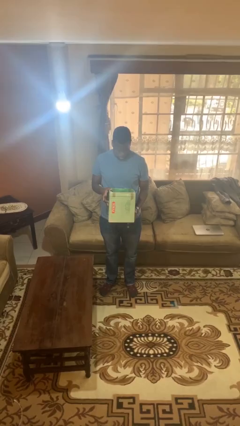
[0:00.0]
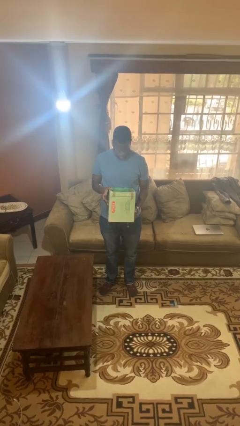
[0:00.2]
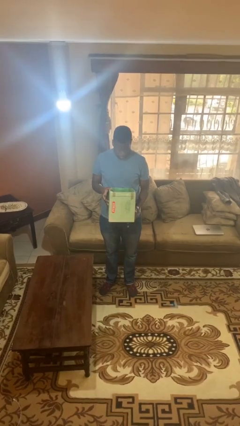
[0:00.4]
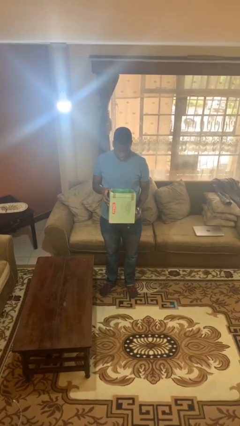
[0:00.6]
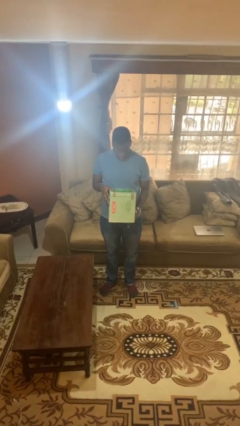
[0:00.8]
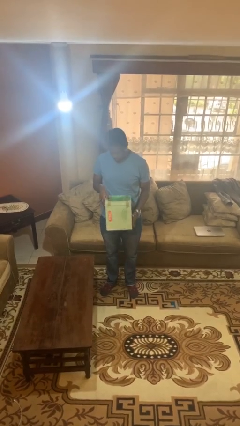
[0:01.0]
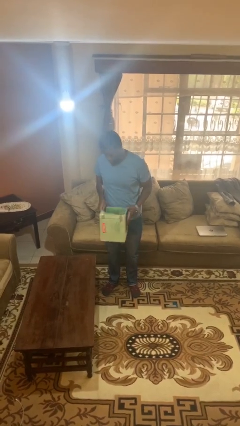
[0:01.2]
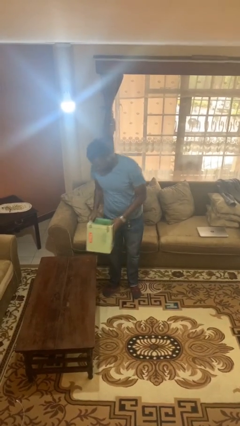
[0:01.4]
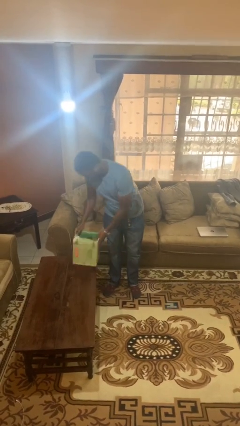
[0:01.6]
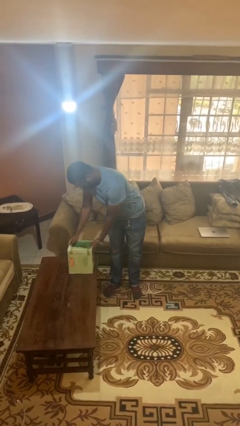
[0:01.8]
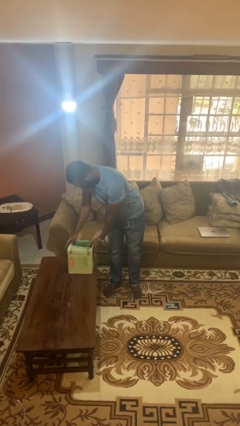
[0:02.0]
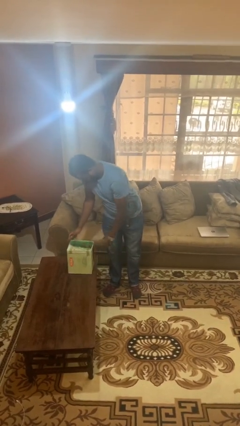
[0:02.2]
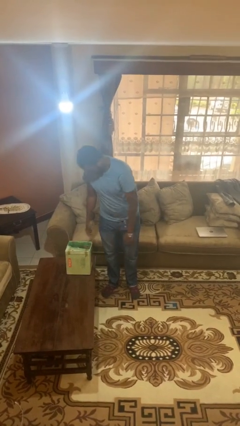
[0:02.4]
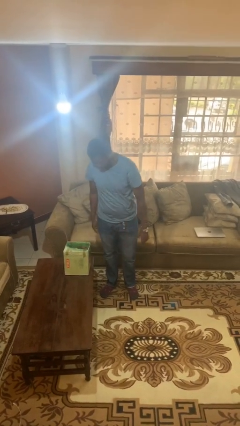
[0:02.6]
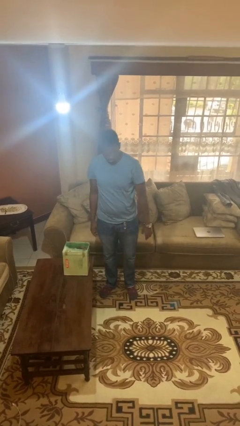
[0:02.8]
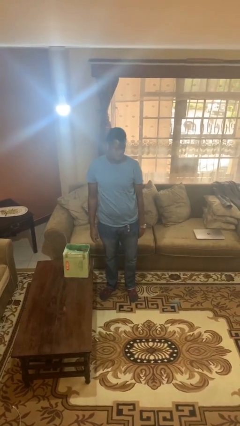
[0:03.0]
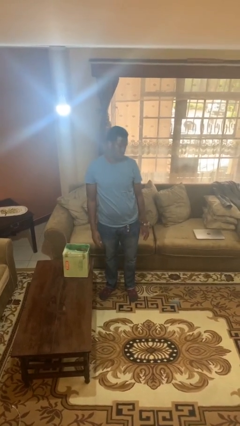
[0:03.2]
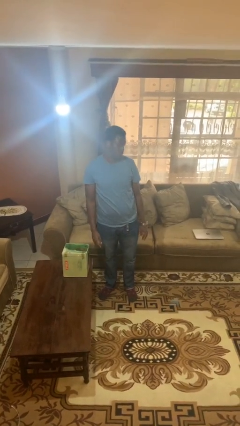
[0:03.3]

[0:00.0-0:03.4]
person puts down object on table

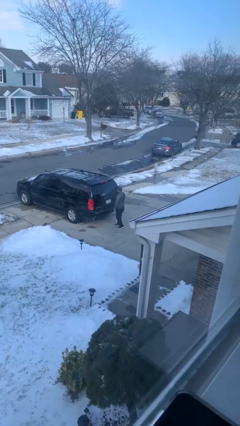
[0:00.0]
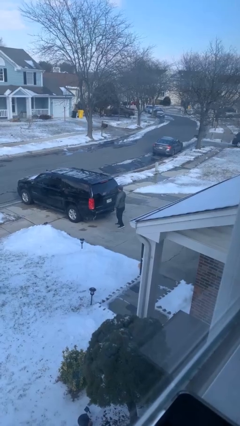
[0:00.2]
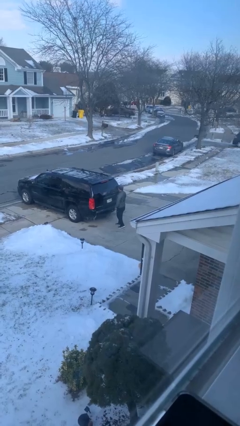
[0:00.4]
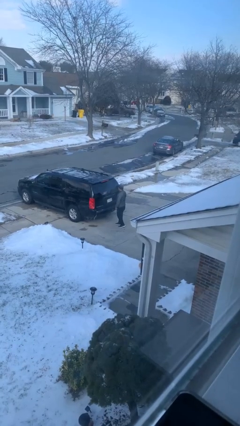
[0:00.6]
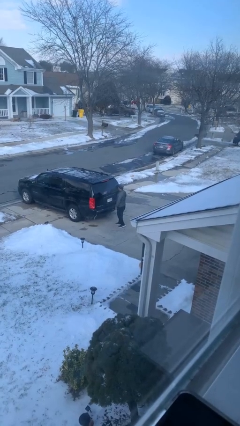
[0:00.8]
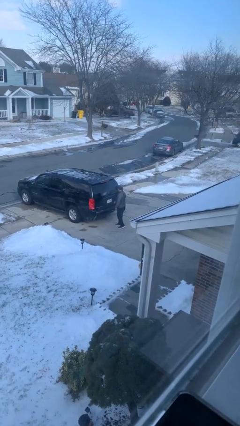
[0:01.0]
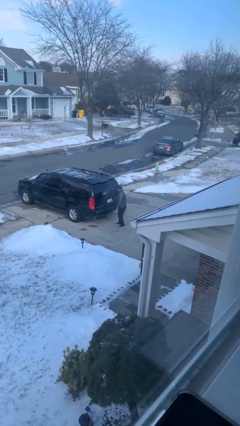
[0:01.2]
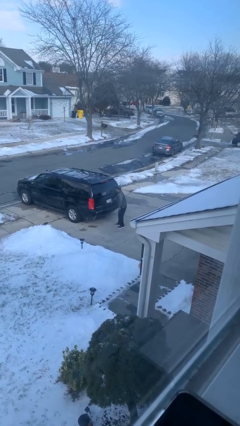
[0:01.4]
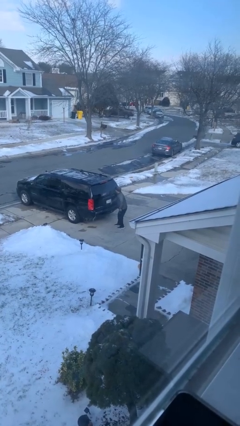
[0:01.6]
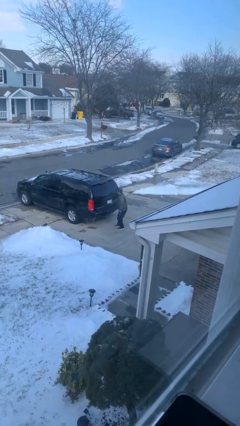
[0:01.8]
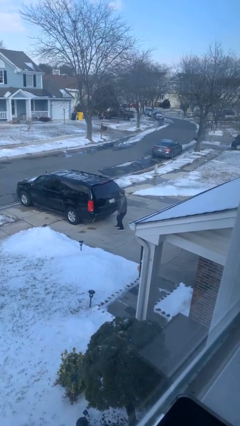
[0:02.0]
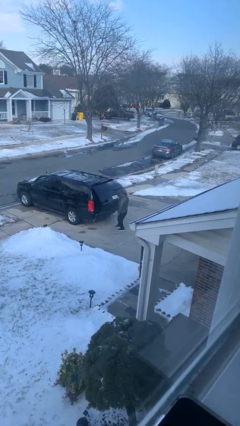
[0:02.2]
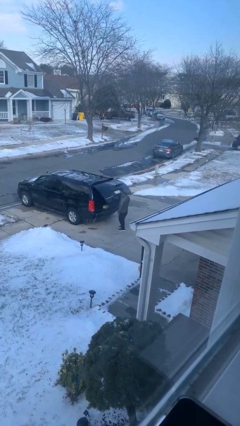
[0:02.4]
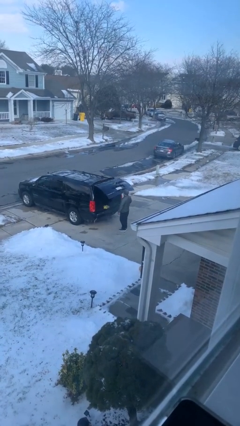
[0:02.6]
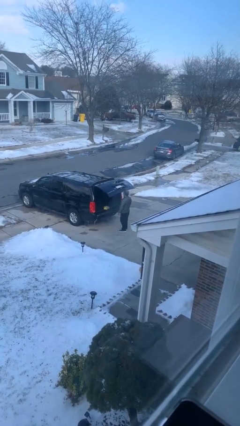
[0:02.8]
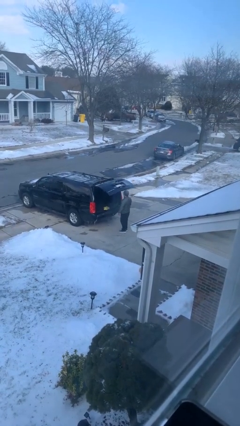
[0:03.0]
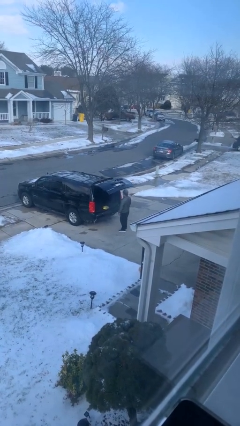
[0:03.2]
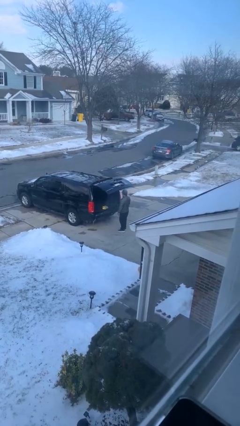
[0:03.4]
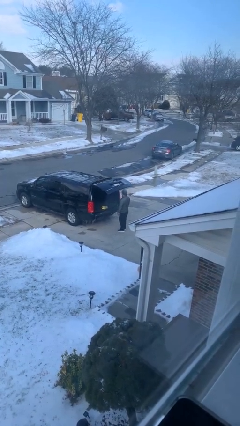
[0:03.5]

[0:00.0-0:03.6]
person opens car trunk

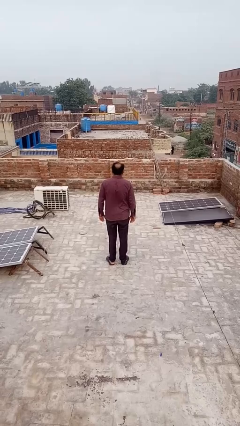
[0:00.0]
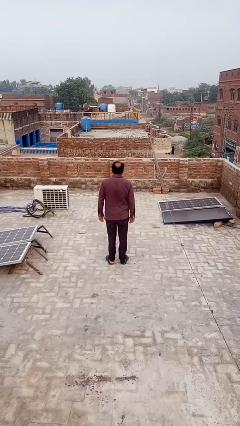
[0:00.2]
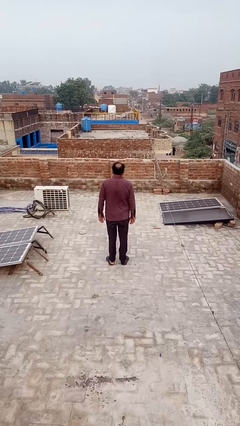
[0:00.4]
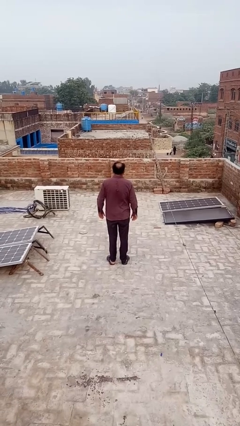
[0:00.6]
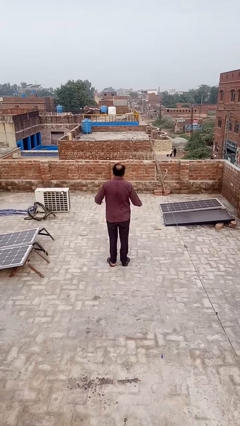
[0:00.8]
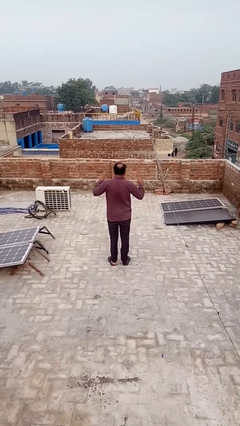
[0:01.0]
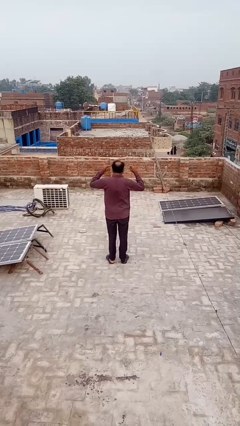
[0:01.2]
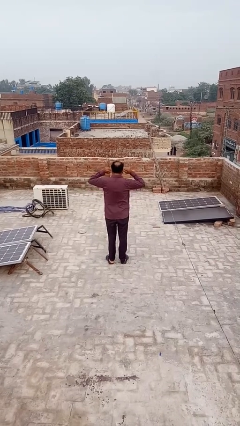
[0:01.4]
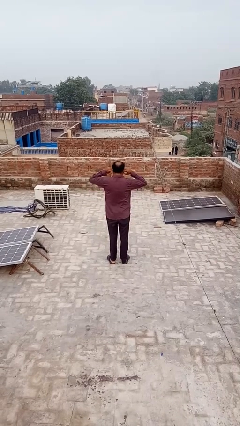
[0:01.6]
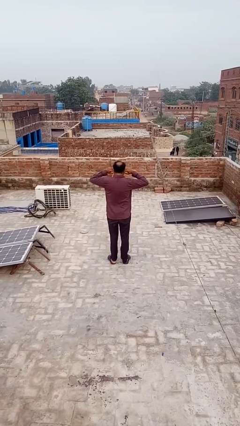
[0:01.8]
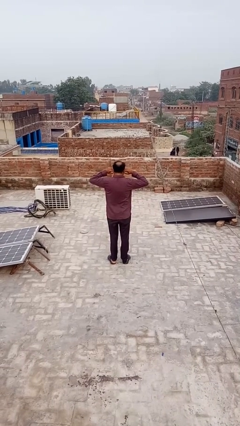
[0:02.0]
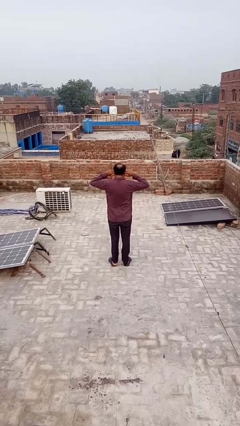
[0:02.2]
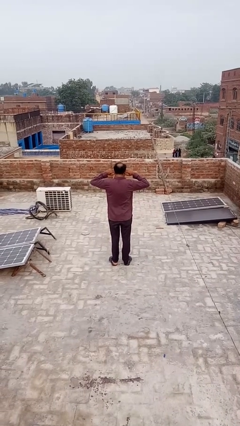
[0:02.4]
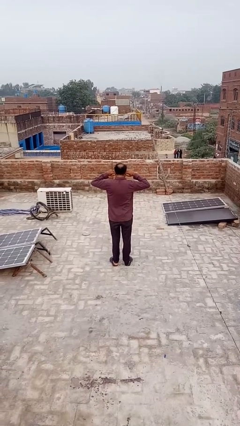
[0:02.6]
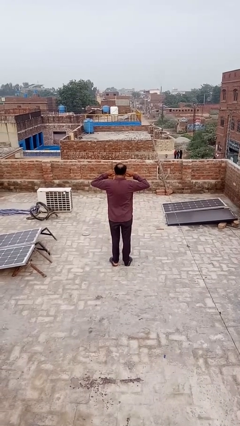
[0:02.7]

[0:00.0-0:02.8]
person puts fingers in ear

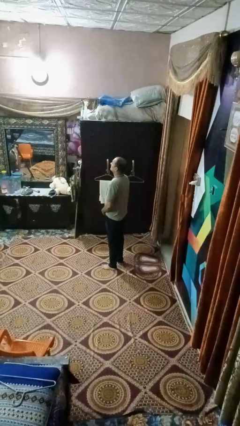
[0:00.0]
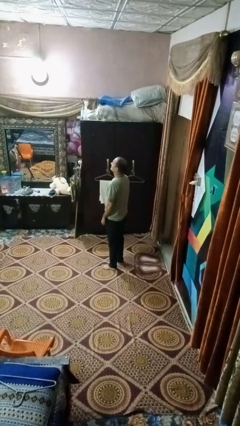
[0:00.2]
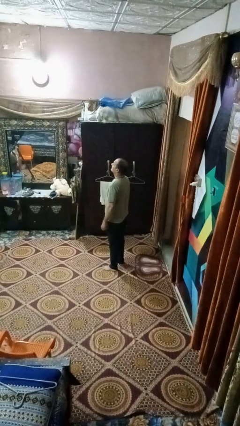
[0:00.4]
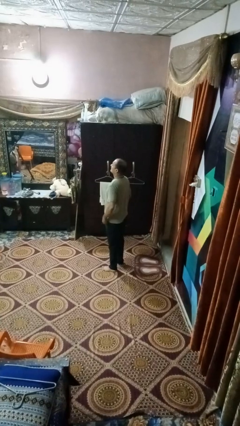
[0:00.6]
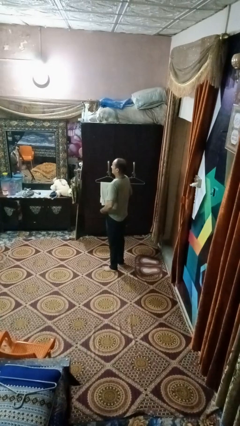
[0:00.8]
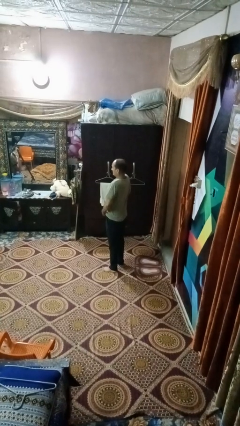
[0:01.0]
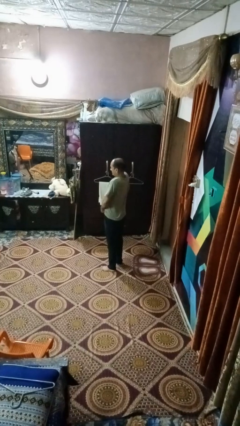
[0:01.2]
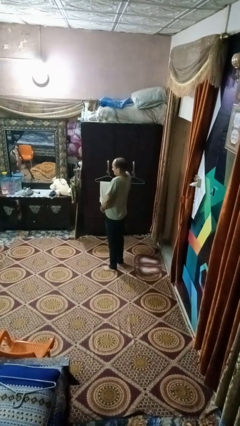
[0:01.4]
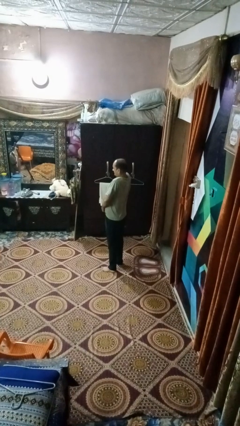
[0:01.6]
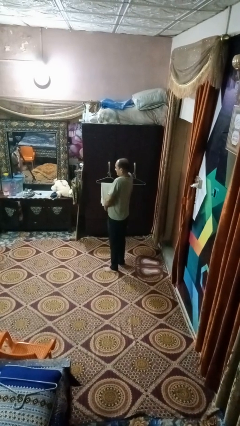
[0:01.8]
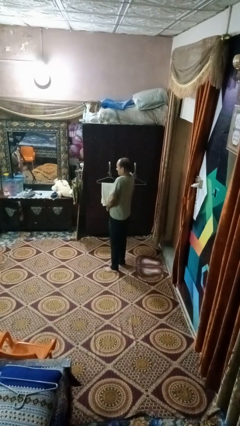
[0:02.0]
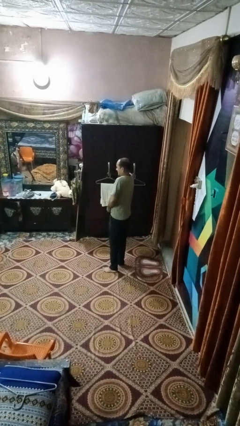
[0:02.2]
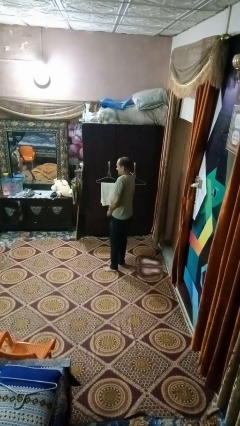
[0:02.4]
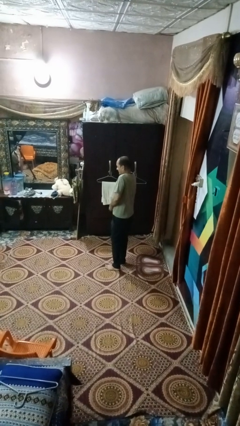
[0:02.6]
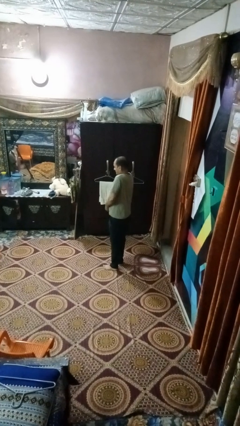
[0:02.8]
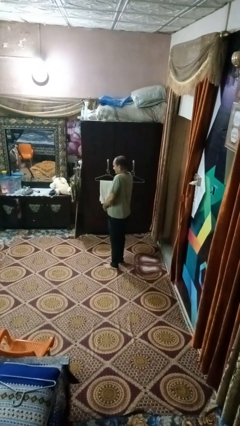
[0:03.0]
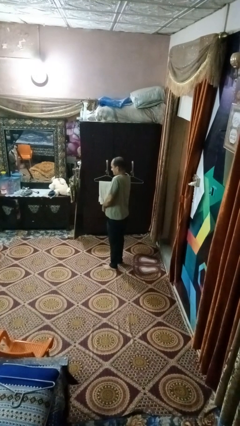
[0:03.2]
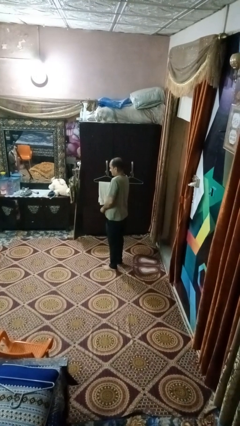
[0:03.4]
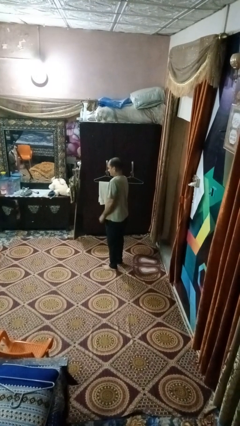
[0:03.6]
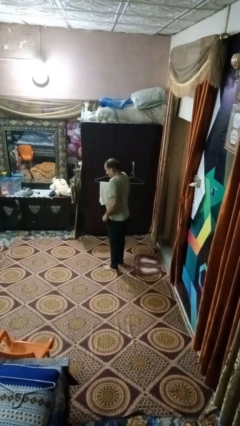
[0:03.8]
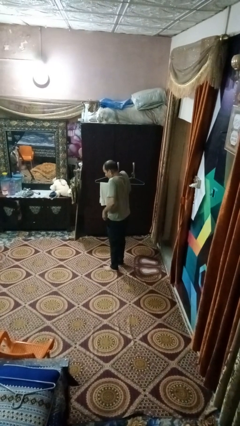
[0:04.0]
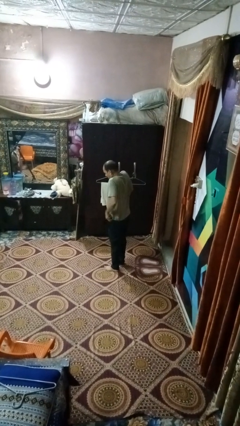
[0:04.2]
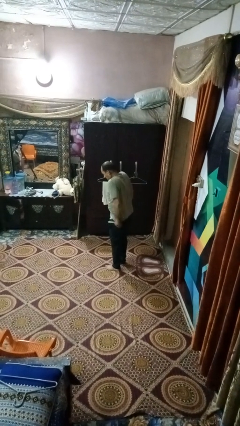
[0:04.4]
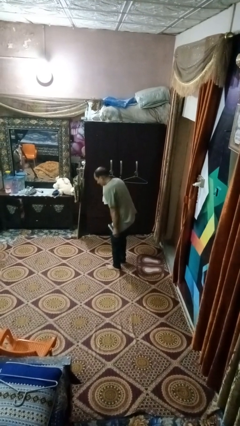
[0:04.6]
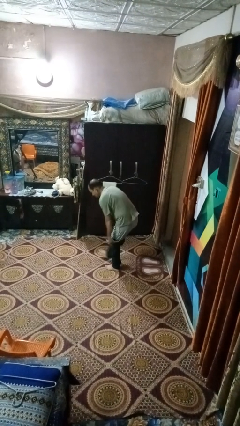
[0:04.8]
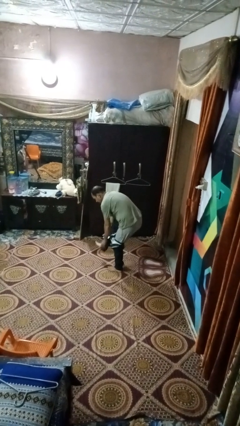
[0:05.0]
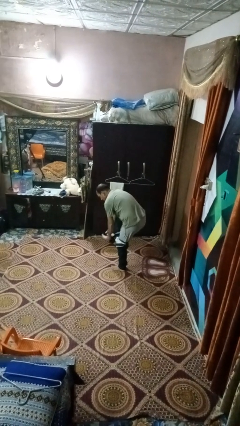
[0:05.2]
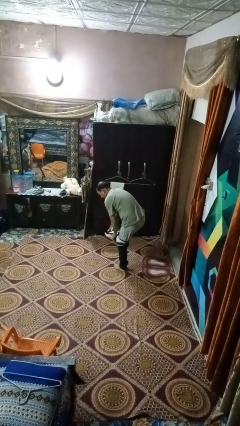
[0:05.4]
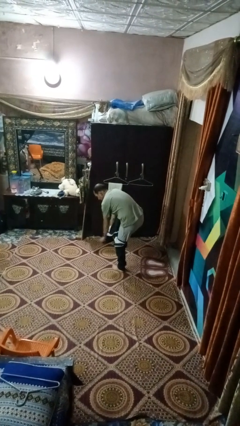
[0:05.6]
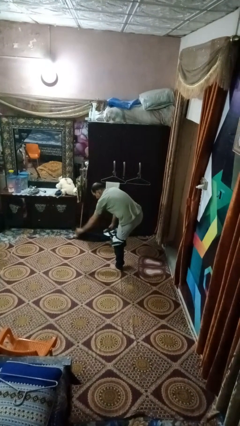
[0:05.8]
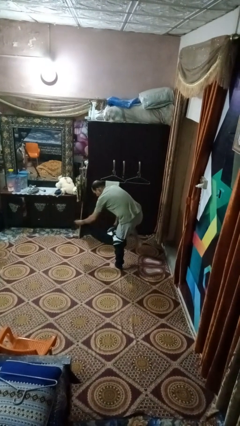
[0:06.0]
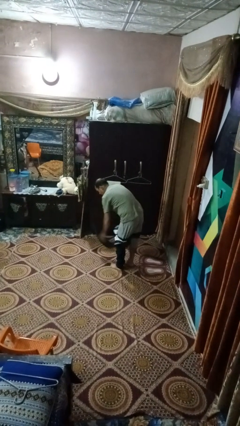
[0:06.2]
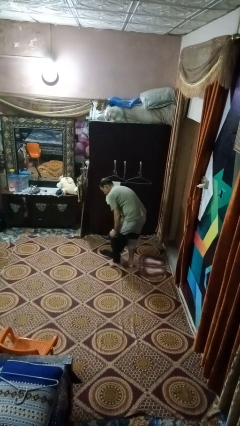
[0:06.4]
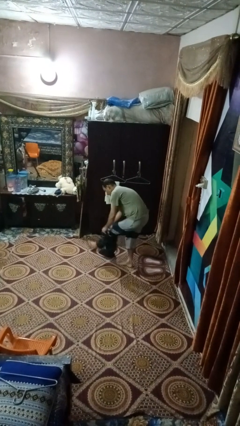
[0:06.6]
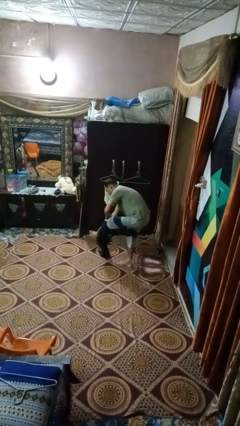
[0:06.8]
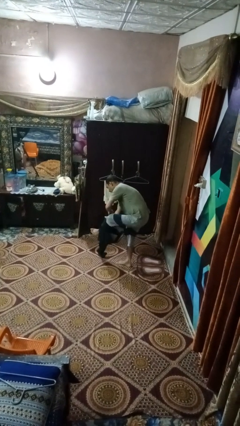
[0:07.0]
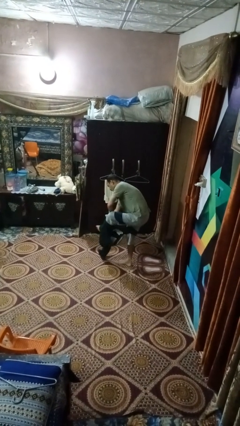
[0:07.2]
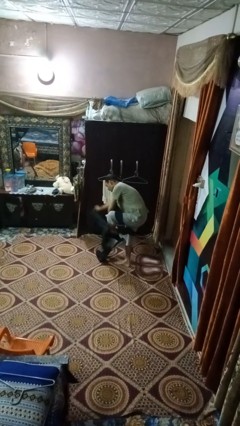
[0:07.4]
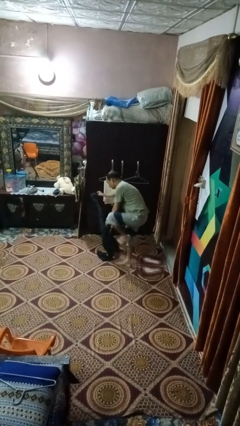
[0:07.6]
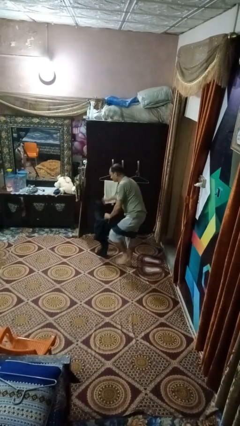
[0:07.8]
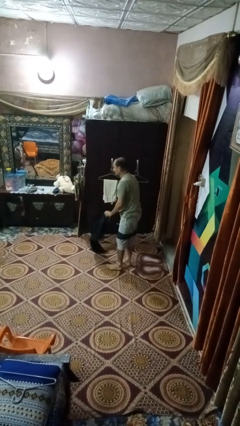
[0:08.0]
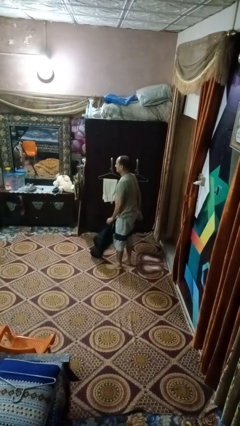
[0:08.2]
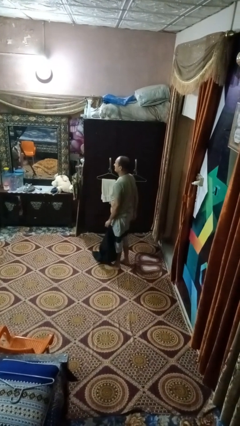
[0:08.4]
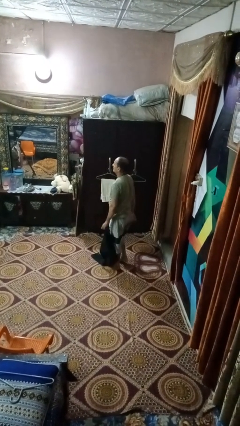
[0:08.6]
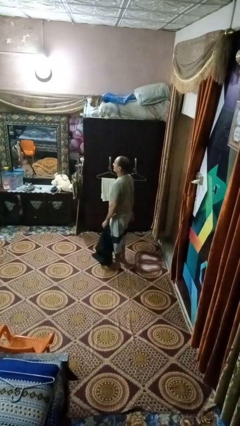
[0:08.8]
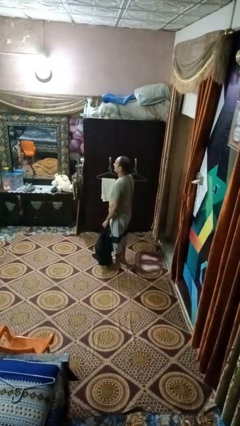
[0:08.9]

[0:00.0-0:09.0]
person takes off pants
